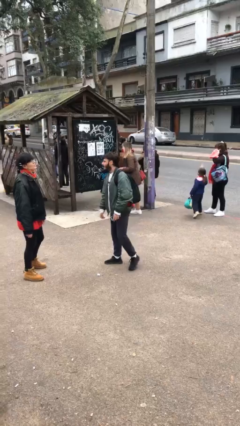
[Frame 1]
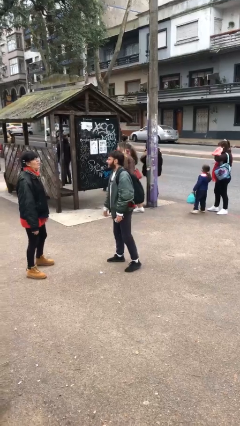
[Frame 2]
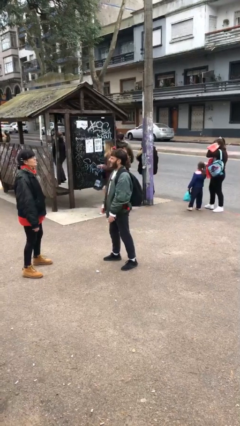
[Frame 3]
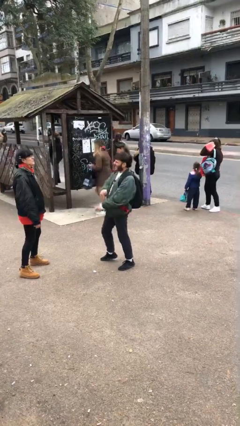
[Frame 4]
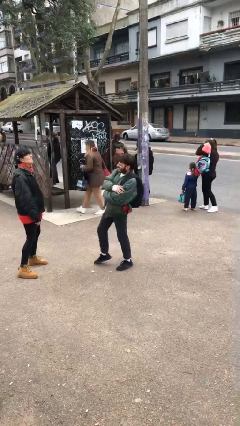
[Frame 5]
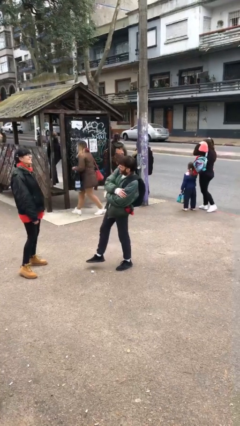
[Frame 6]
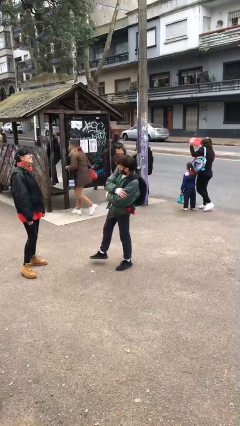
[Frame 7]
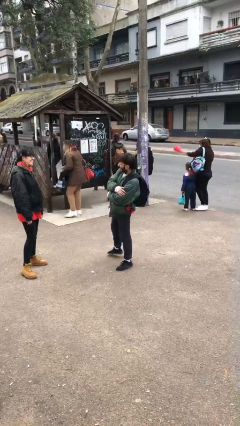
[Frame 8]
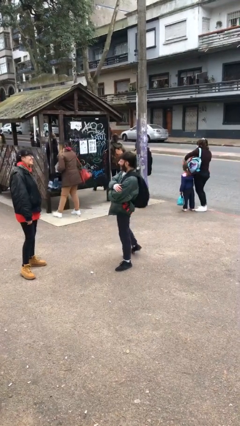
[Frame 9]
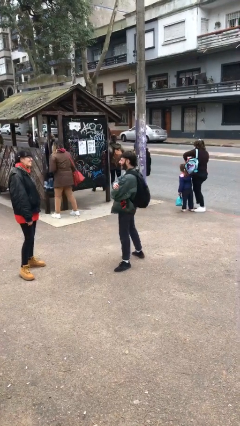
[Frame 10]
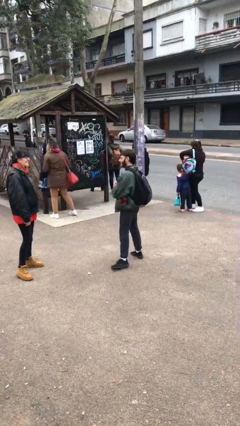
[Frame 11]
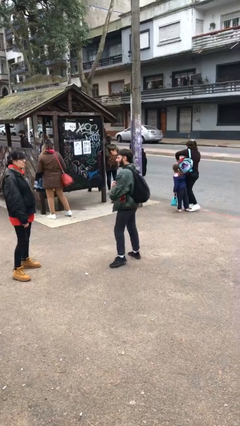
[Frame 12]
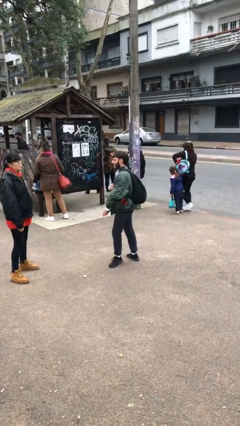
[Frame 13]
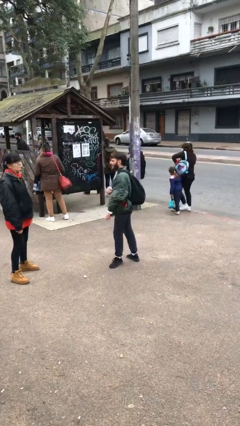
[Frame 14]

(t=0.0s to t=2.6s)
person laughs with person

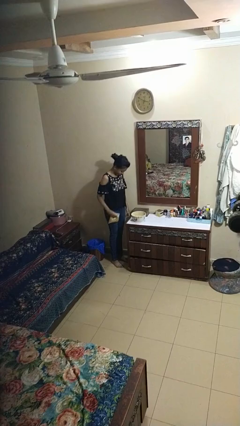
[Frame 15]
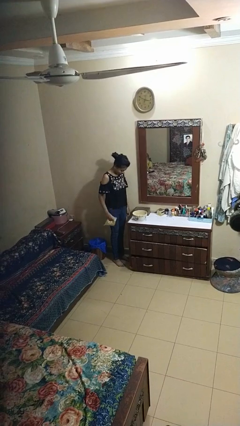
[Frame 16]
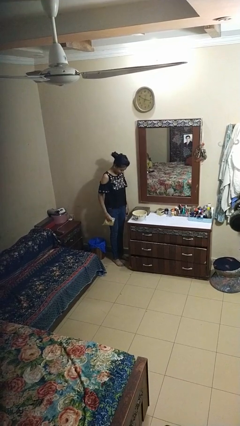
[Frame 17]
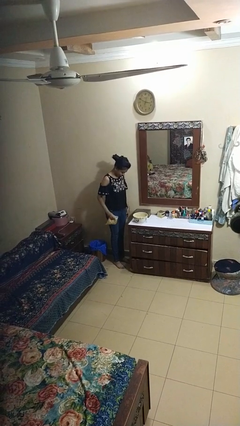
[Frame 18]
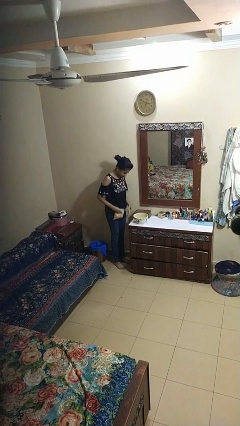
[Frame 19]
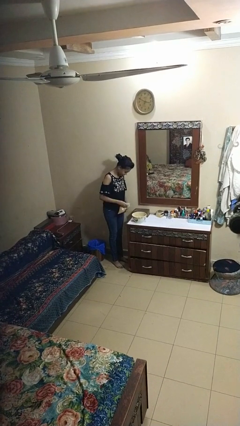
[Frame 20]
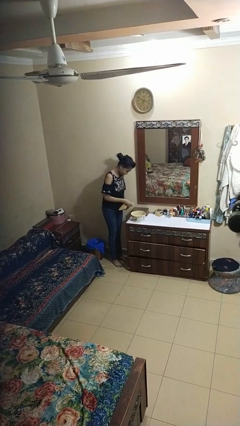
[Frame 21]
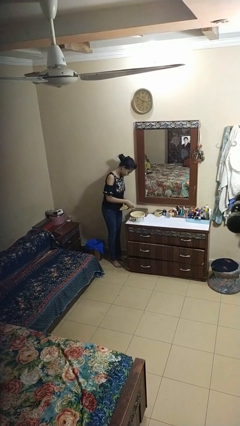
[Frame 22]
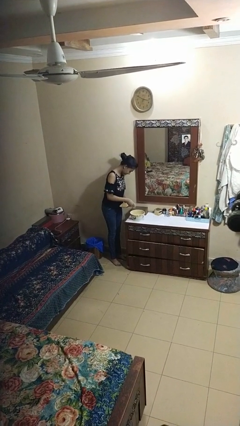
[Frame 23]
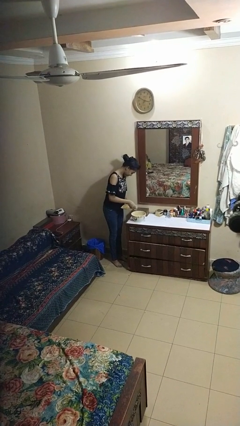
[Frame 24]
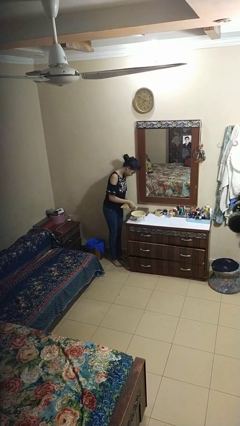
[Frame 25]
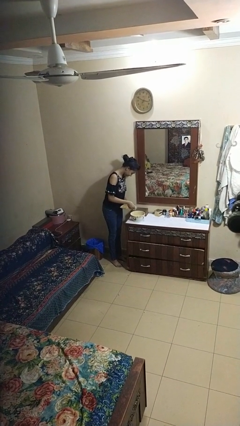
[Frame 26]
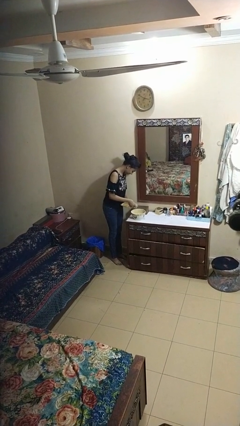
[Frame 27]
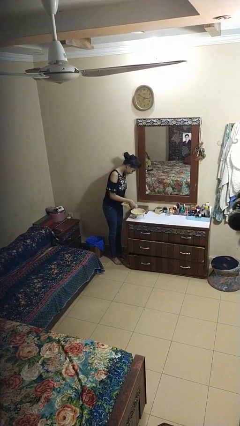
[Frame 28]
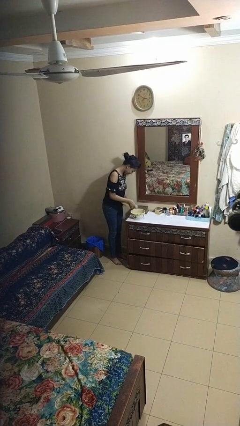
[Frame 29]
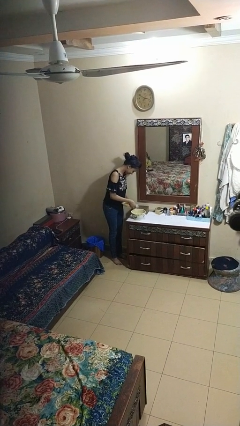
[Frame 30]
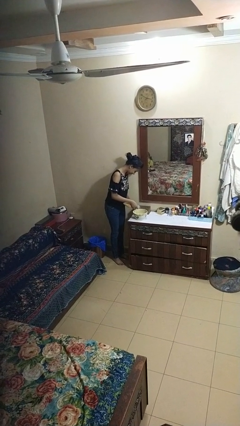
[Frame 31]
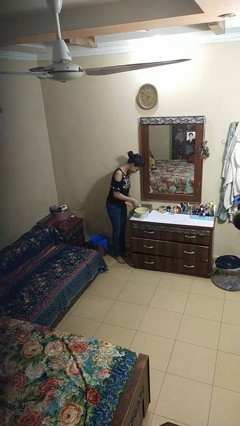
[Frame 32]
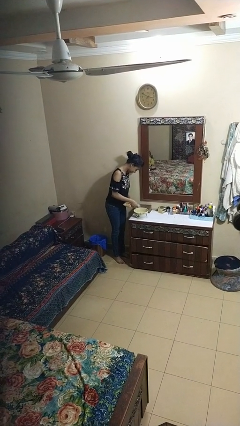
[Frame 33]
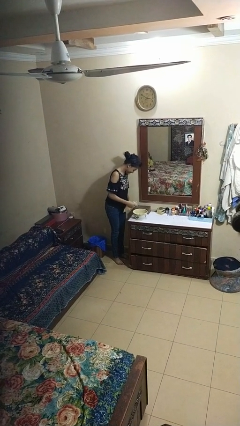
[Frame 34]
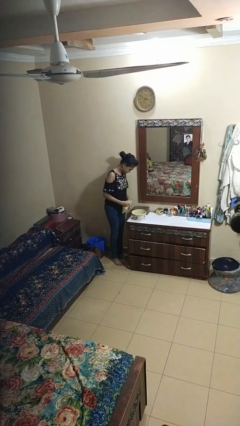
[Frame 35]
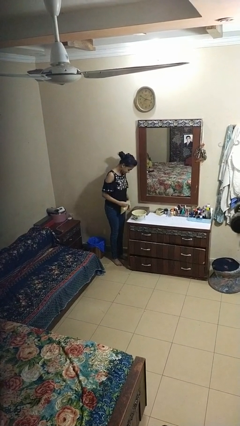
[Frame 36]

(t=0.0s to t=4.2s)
person pours into bowl

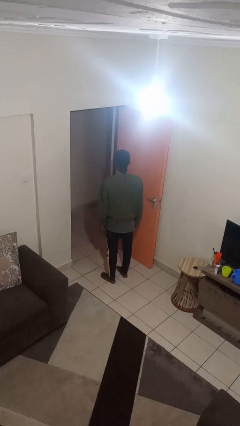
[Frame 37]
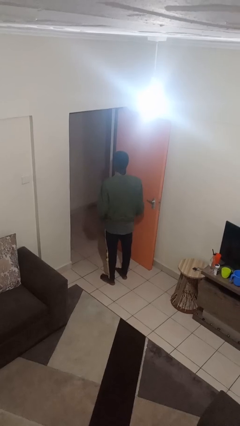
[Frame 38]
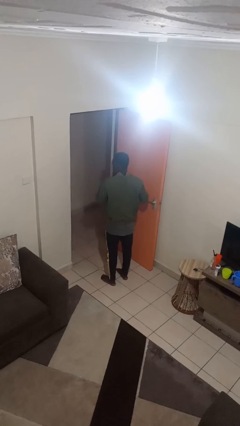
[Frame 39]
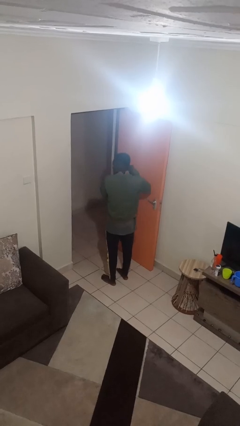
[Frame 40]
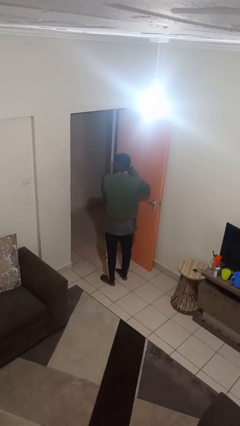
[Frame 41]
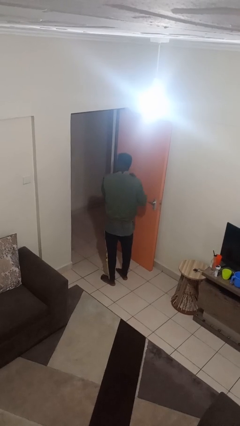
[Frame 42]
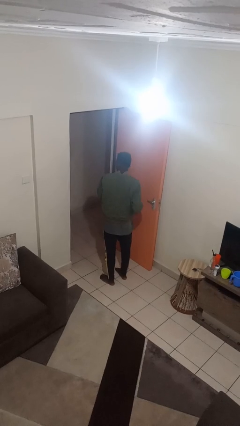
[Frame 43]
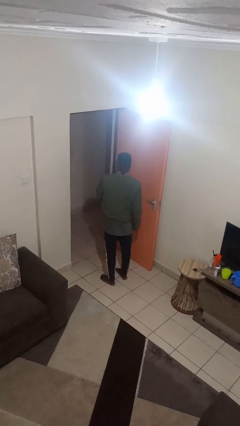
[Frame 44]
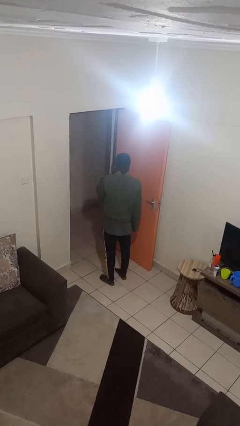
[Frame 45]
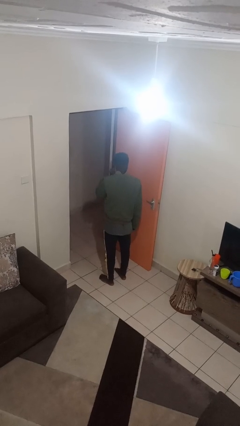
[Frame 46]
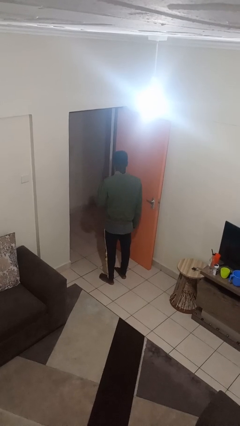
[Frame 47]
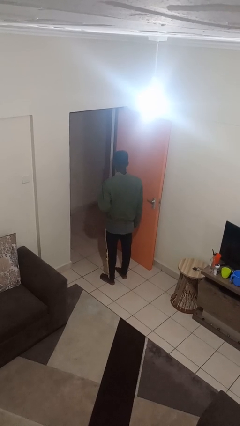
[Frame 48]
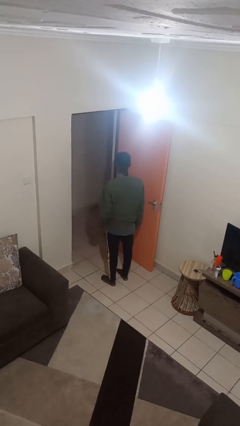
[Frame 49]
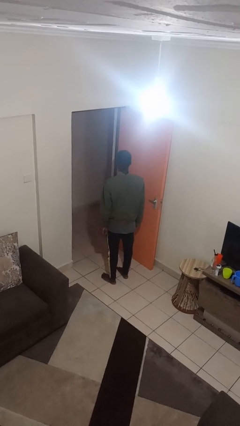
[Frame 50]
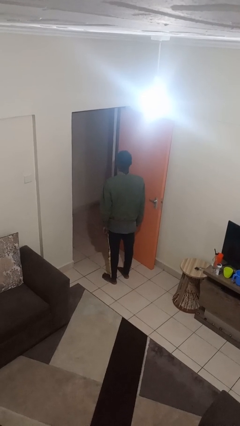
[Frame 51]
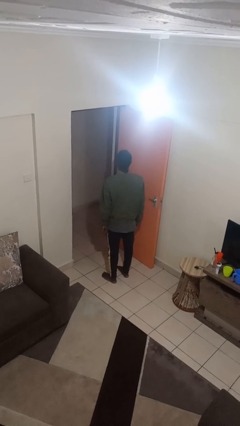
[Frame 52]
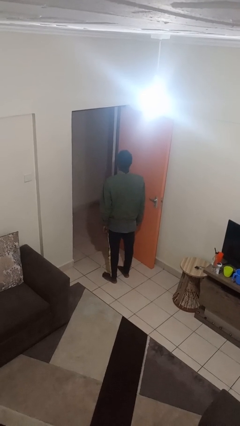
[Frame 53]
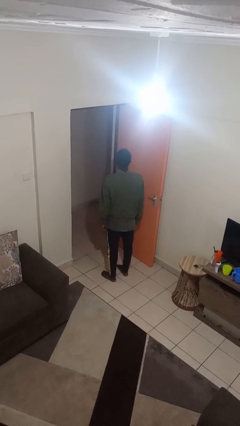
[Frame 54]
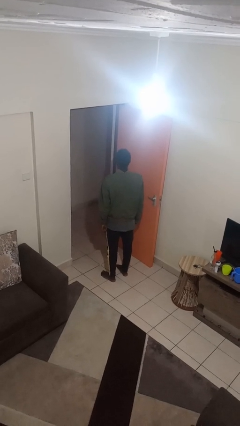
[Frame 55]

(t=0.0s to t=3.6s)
person takes off earrings

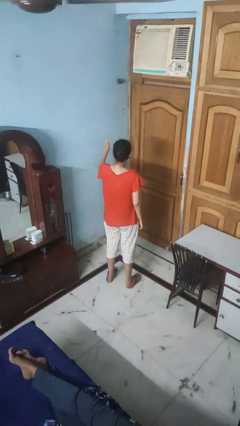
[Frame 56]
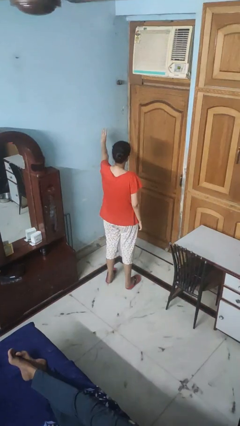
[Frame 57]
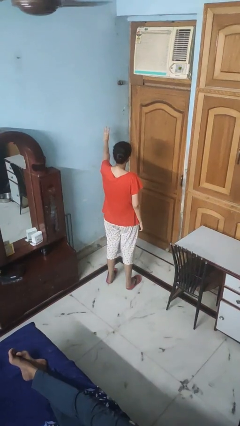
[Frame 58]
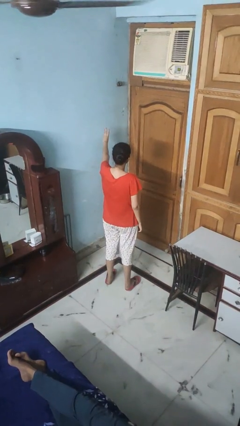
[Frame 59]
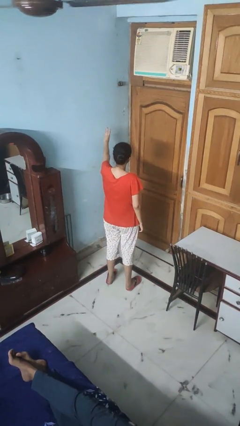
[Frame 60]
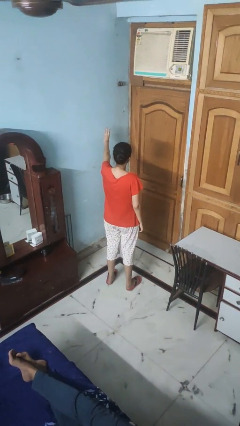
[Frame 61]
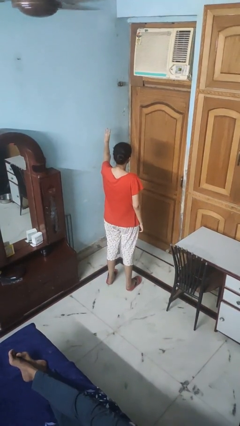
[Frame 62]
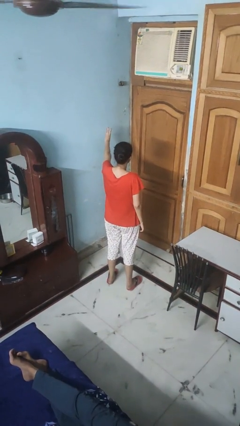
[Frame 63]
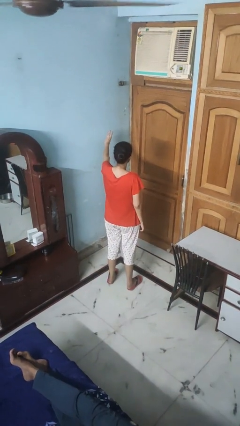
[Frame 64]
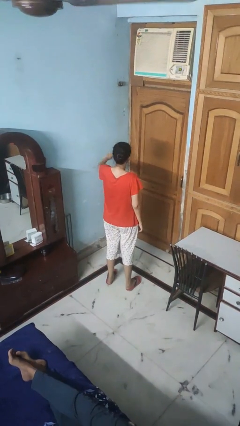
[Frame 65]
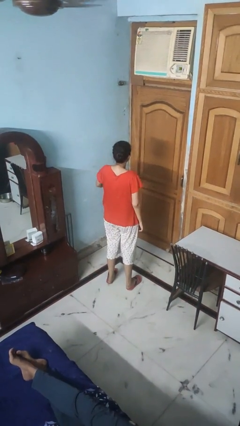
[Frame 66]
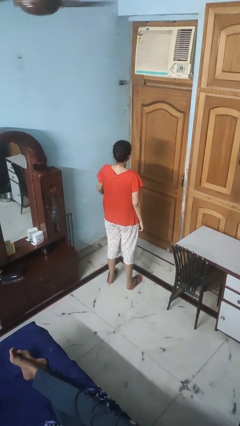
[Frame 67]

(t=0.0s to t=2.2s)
person gestures number three

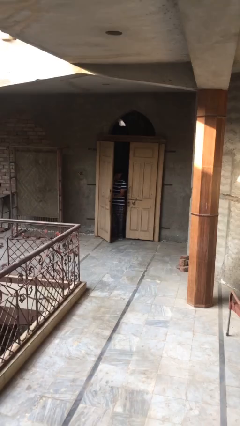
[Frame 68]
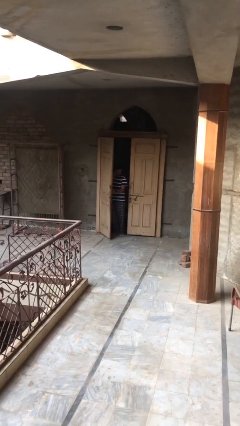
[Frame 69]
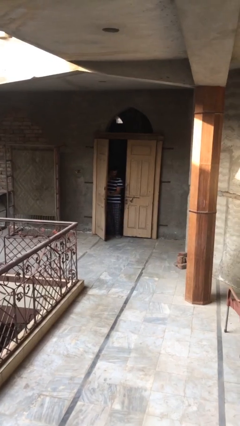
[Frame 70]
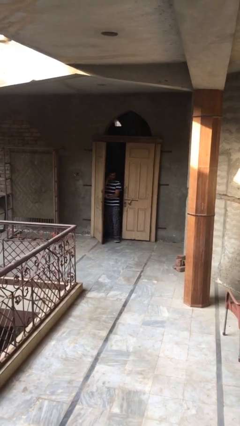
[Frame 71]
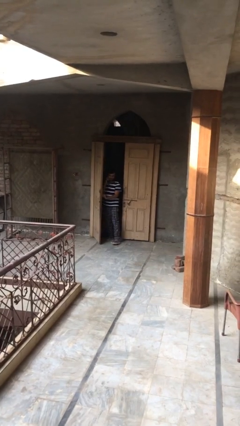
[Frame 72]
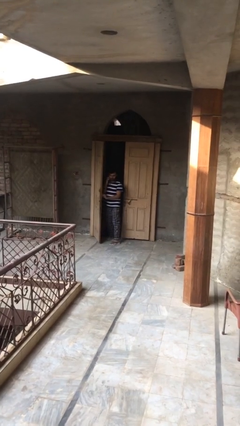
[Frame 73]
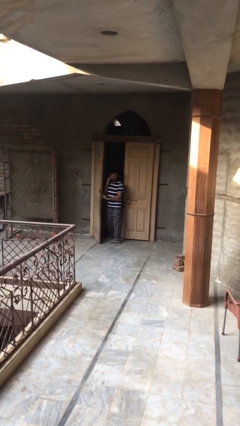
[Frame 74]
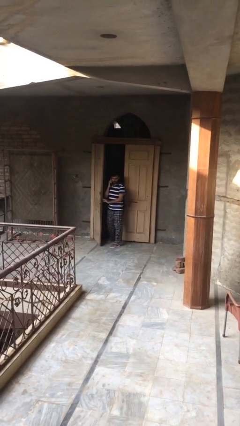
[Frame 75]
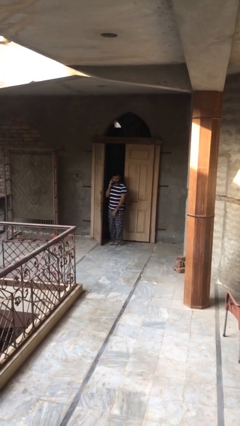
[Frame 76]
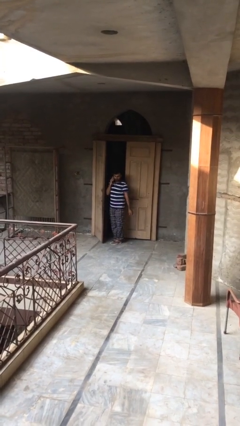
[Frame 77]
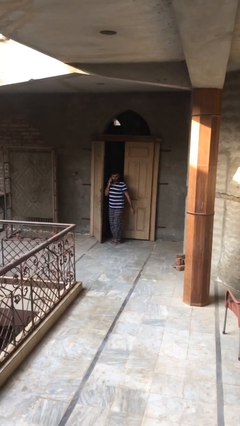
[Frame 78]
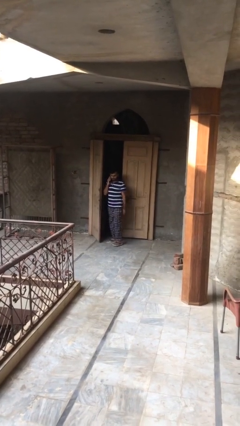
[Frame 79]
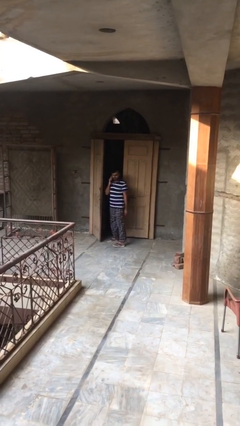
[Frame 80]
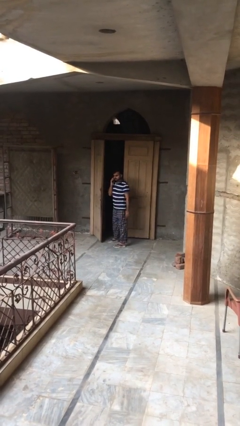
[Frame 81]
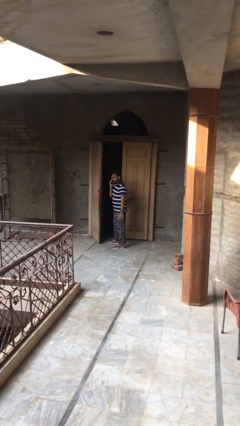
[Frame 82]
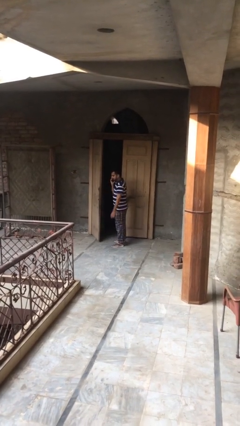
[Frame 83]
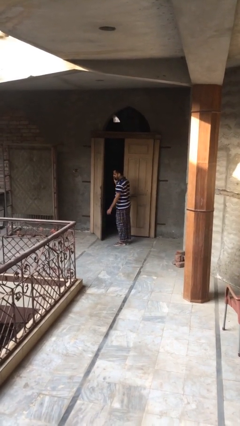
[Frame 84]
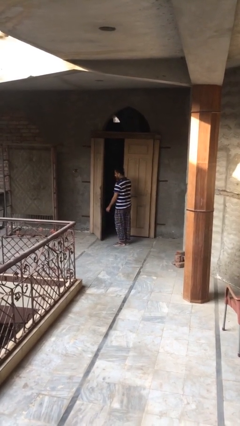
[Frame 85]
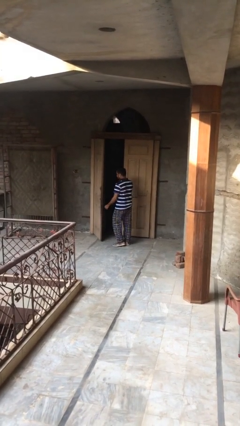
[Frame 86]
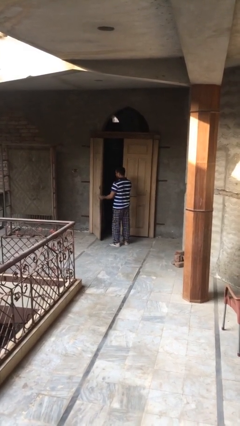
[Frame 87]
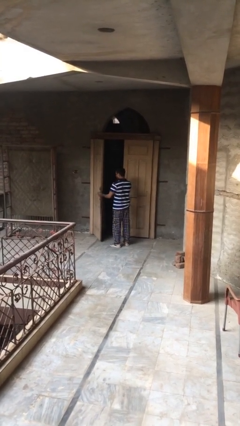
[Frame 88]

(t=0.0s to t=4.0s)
person enters scene through structure

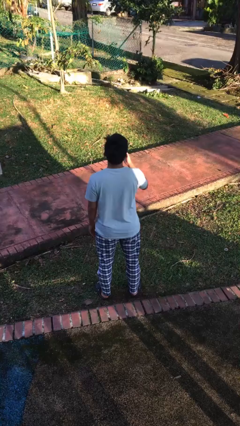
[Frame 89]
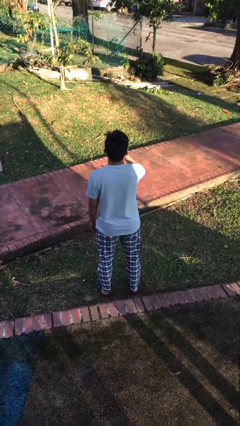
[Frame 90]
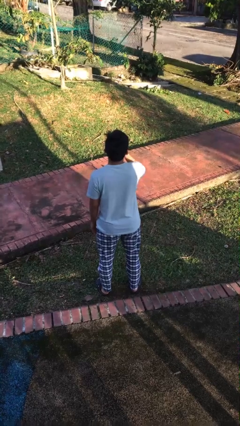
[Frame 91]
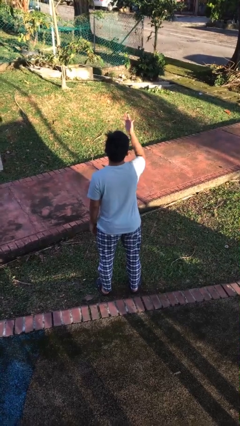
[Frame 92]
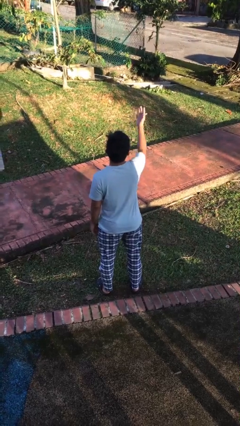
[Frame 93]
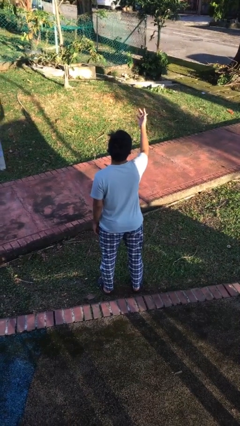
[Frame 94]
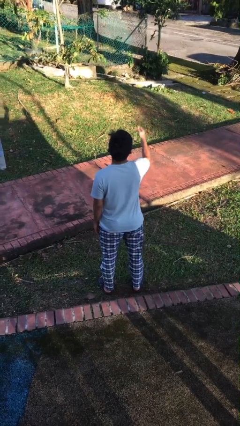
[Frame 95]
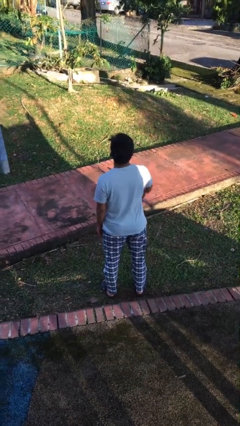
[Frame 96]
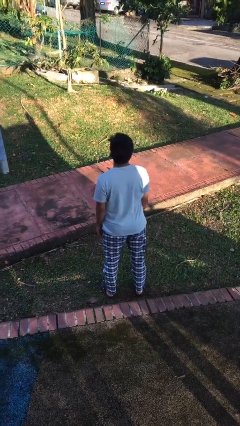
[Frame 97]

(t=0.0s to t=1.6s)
person gestures blow kiss
